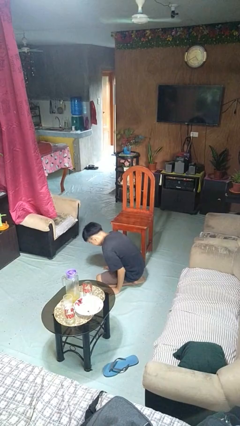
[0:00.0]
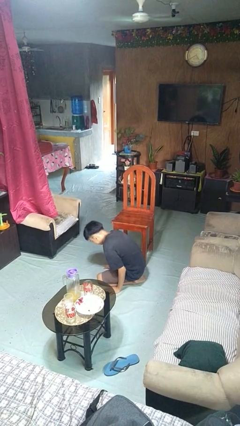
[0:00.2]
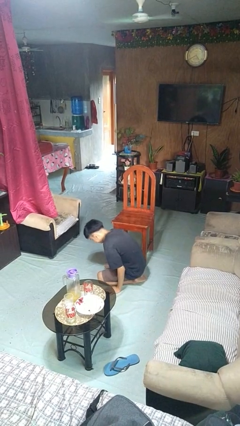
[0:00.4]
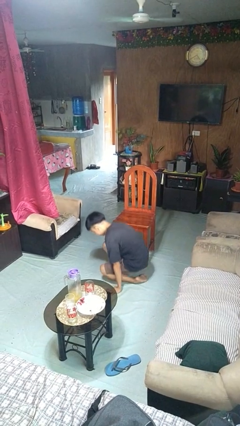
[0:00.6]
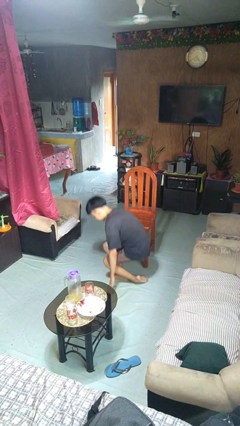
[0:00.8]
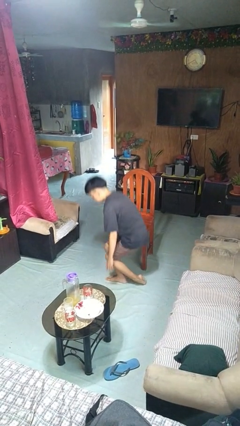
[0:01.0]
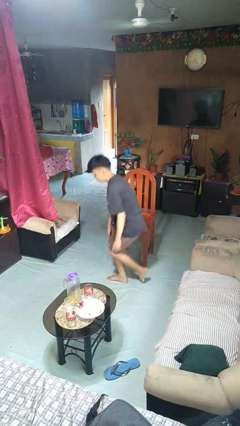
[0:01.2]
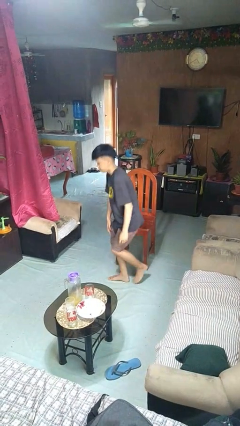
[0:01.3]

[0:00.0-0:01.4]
person stands up from floor

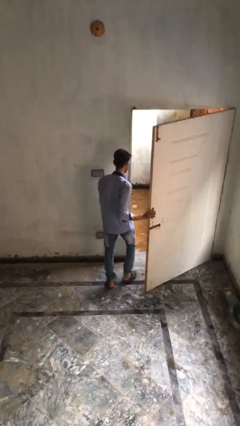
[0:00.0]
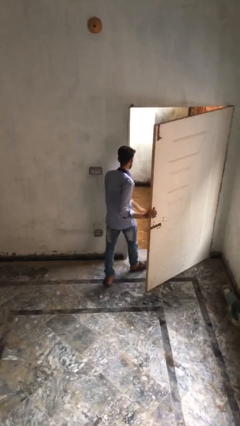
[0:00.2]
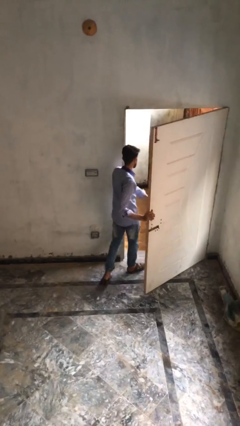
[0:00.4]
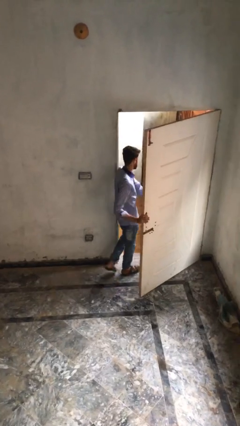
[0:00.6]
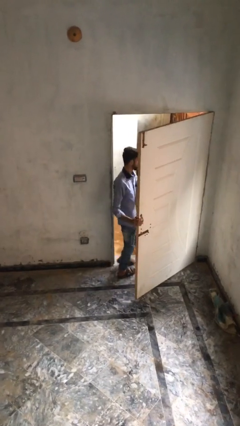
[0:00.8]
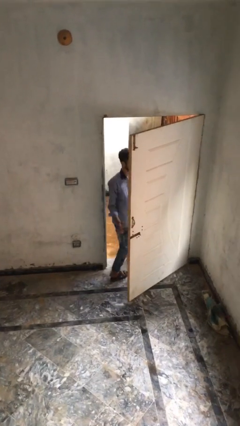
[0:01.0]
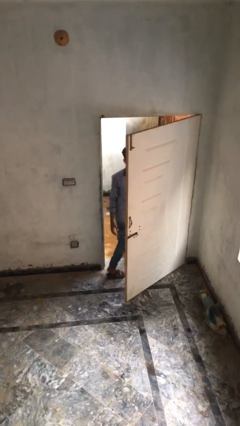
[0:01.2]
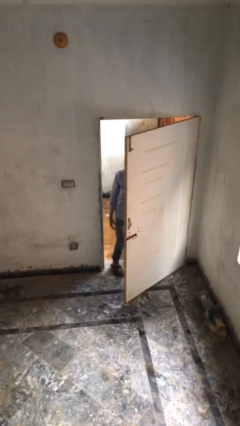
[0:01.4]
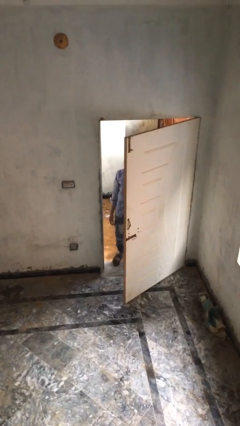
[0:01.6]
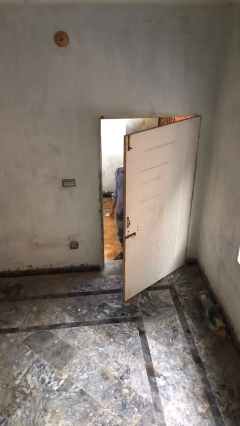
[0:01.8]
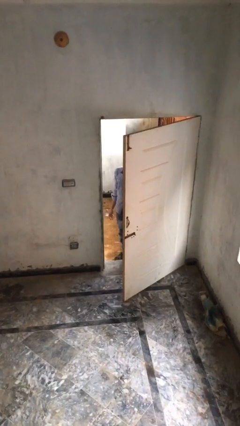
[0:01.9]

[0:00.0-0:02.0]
person exits scene through structure

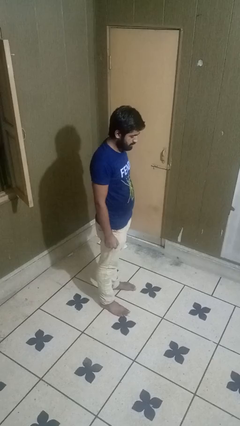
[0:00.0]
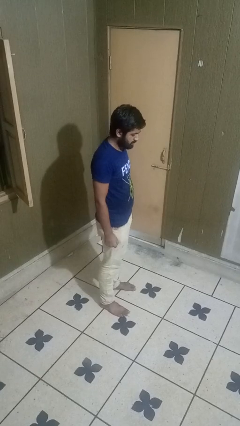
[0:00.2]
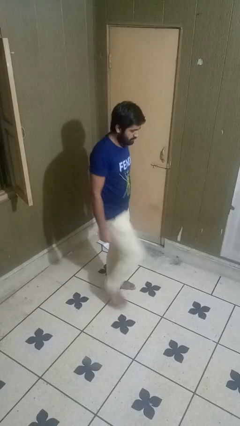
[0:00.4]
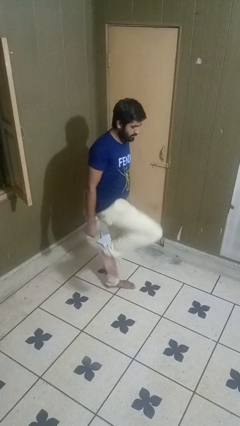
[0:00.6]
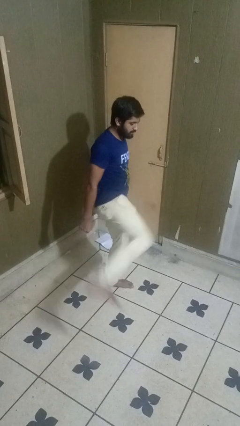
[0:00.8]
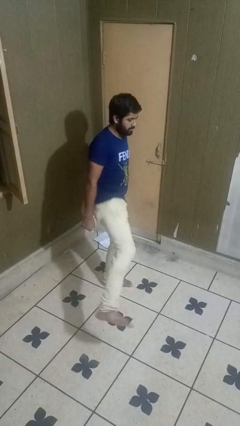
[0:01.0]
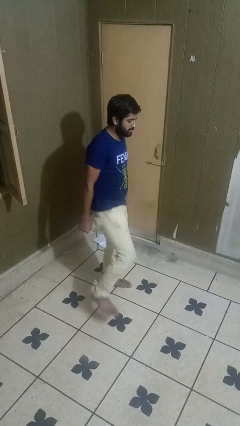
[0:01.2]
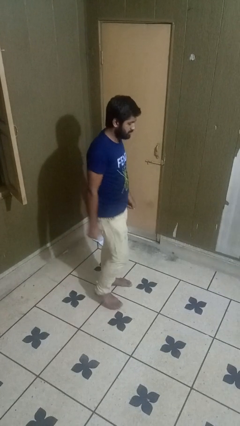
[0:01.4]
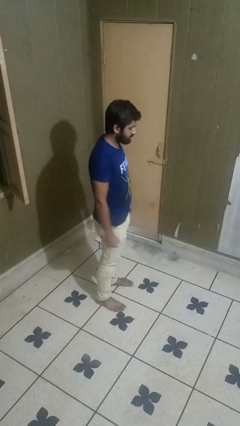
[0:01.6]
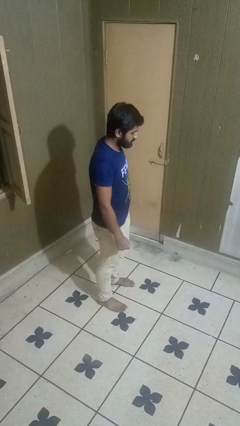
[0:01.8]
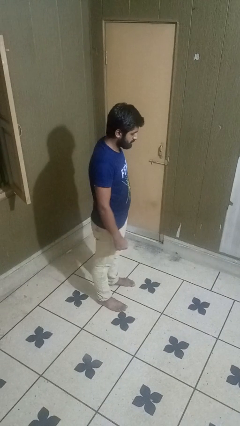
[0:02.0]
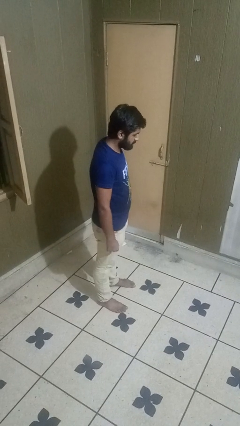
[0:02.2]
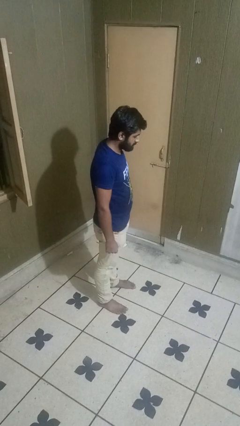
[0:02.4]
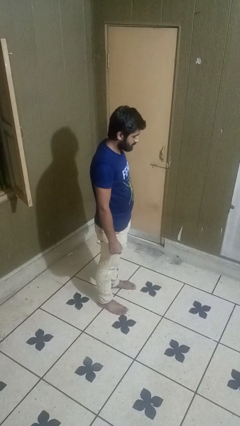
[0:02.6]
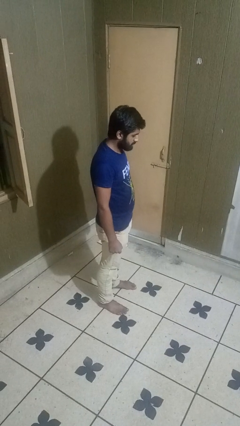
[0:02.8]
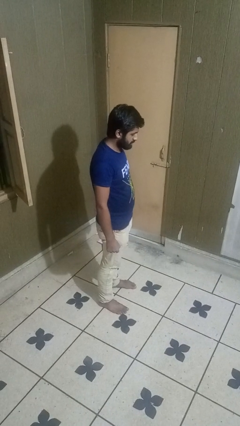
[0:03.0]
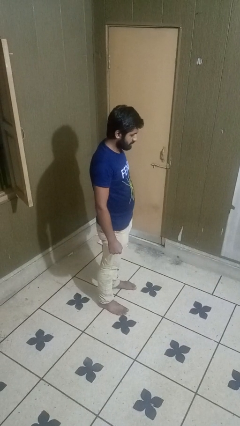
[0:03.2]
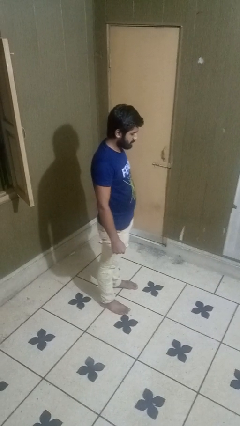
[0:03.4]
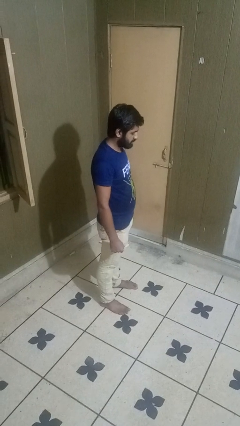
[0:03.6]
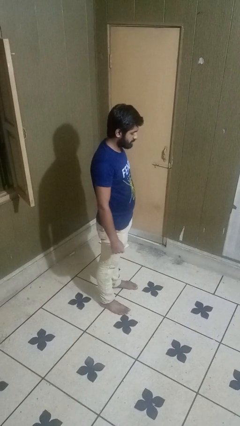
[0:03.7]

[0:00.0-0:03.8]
person karate kicks

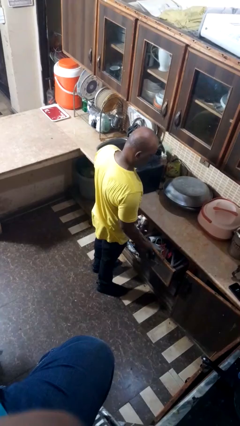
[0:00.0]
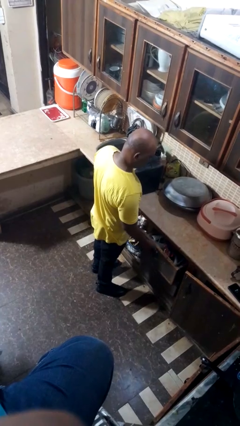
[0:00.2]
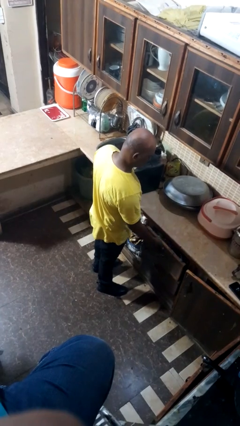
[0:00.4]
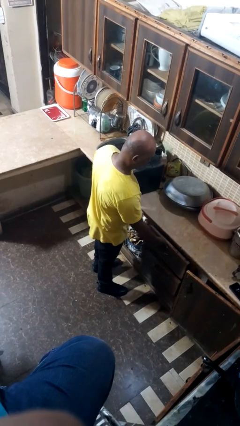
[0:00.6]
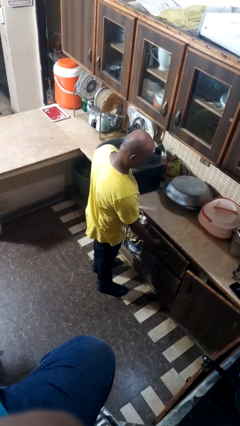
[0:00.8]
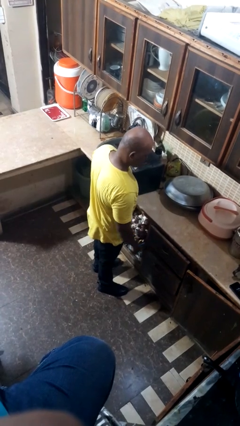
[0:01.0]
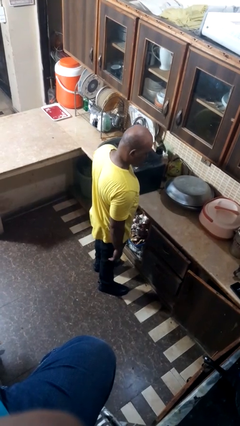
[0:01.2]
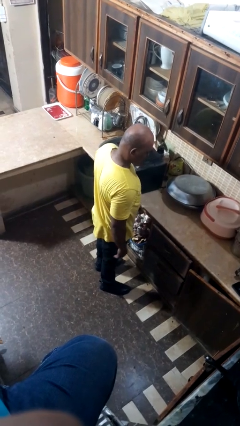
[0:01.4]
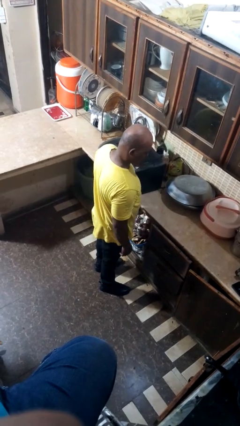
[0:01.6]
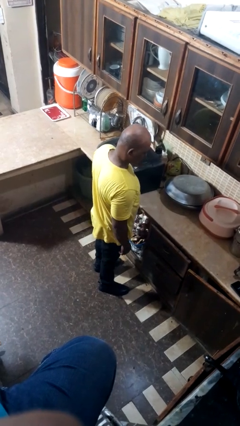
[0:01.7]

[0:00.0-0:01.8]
person closes dresser drawer

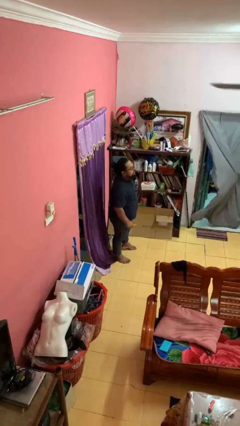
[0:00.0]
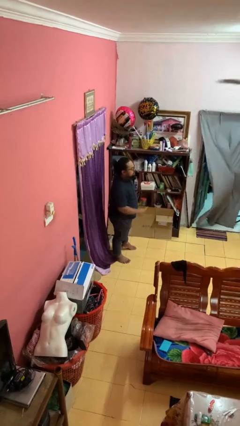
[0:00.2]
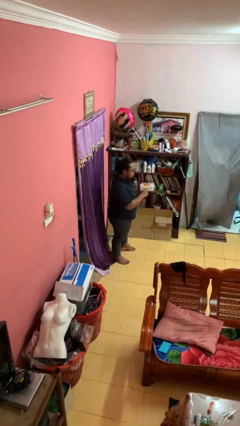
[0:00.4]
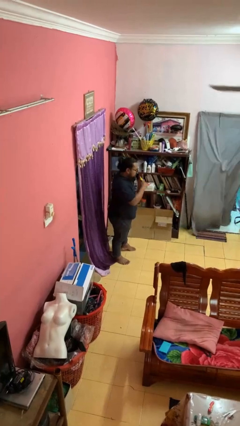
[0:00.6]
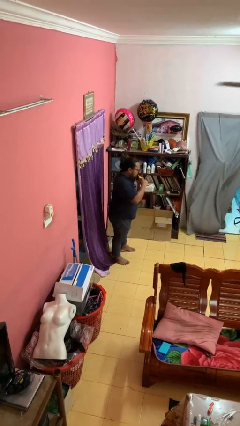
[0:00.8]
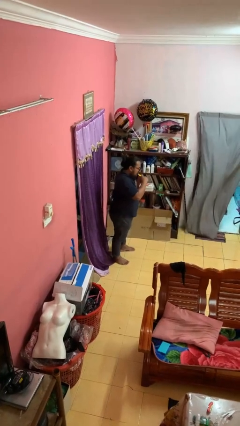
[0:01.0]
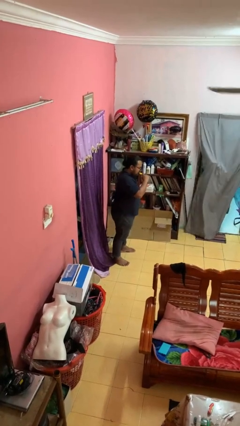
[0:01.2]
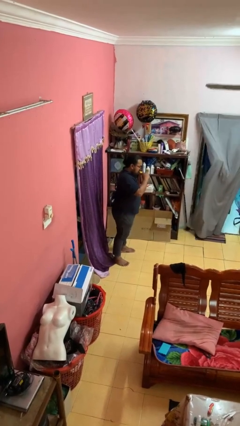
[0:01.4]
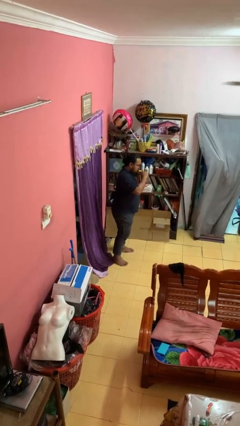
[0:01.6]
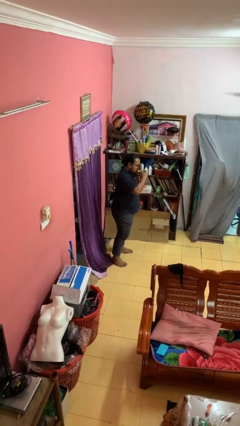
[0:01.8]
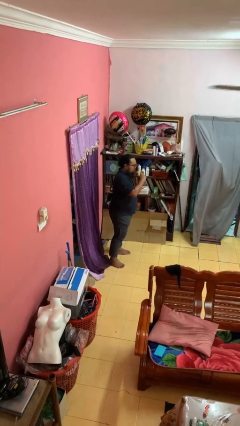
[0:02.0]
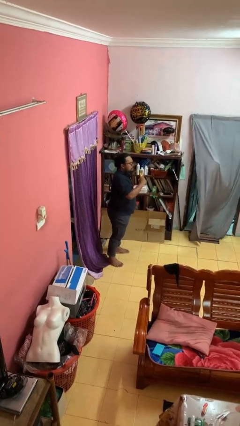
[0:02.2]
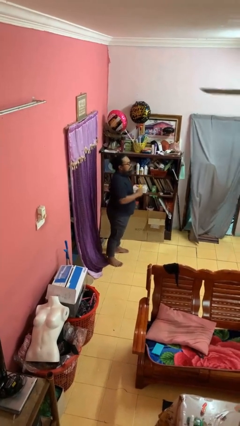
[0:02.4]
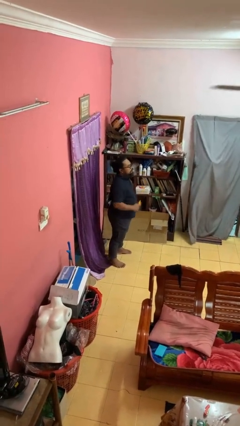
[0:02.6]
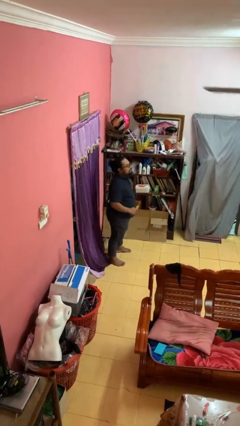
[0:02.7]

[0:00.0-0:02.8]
person eats banana

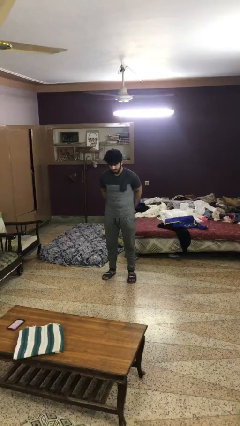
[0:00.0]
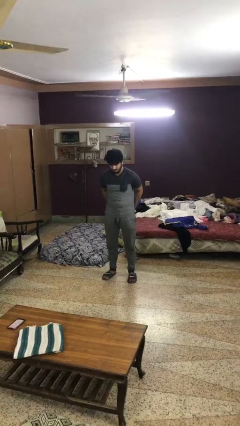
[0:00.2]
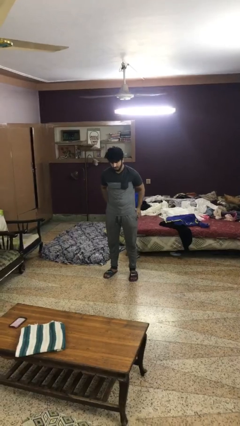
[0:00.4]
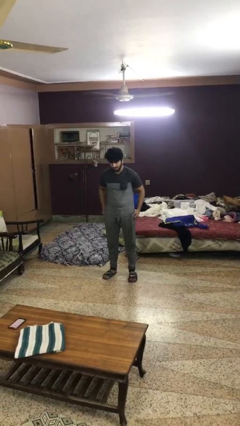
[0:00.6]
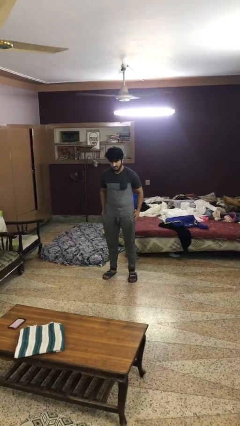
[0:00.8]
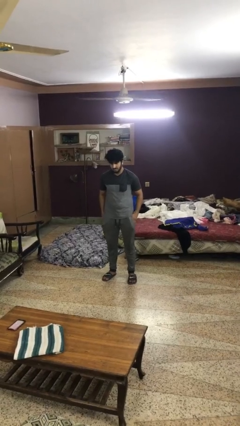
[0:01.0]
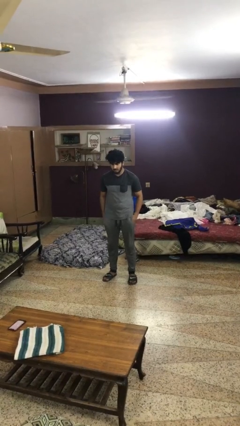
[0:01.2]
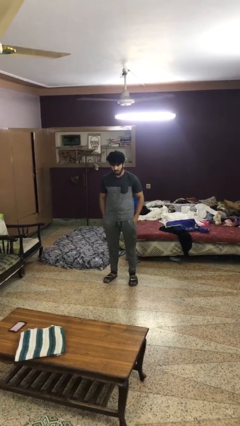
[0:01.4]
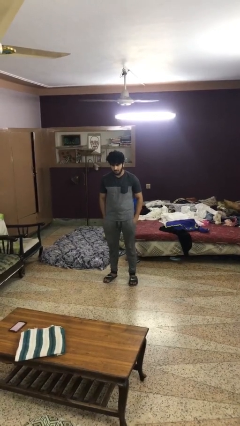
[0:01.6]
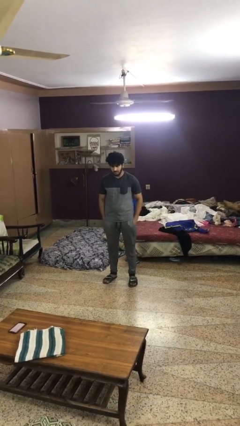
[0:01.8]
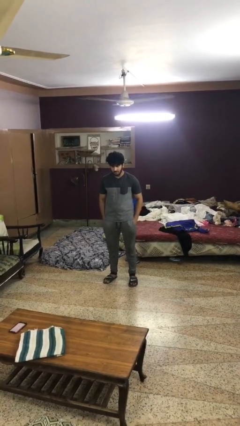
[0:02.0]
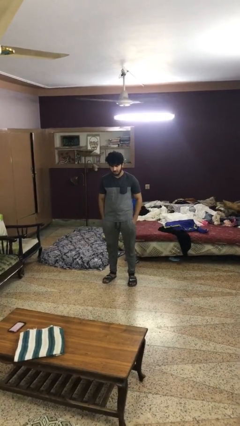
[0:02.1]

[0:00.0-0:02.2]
person puts hands in back pockets

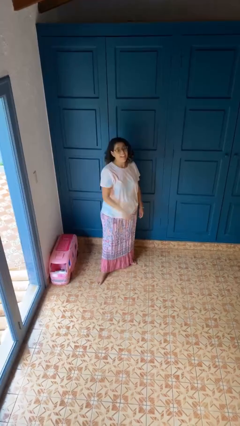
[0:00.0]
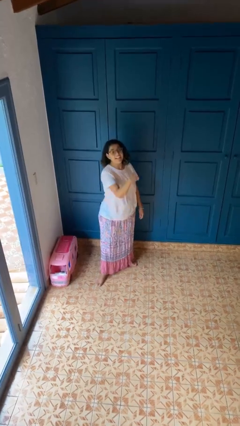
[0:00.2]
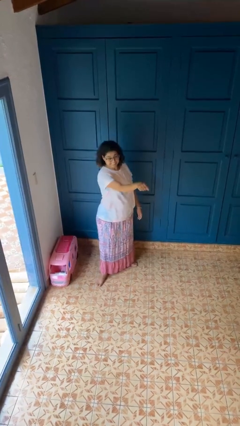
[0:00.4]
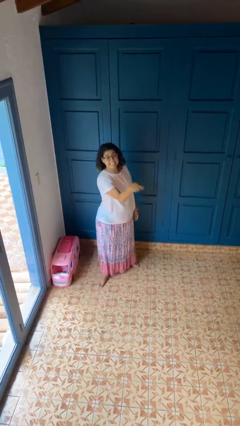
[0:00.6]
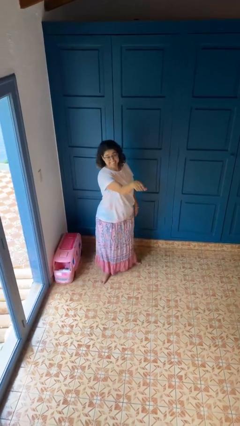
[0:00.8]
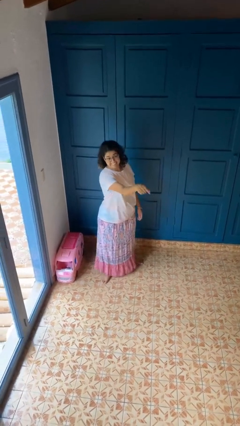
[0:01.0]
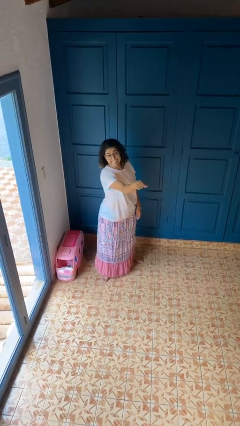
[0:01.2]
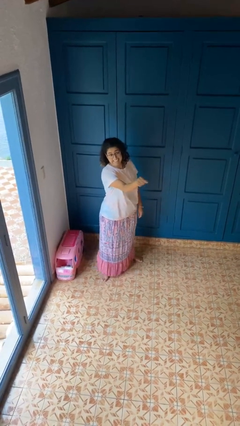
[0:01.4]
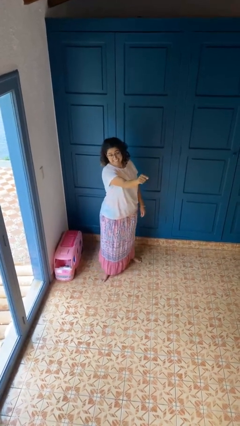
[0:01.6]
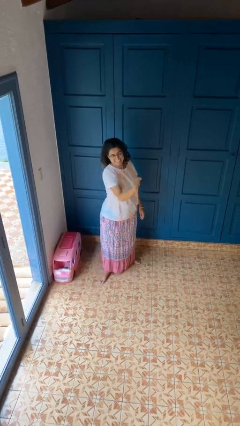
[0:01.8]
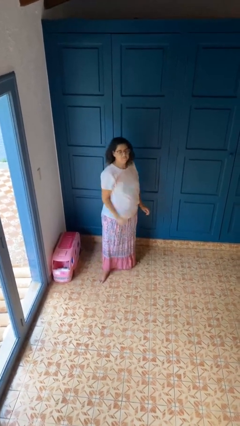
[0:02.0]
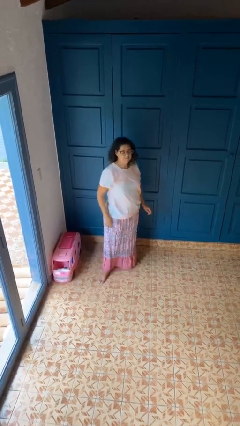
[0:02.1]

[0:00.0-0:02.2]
person points at person

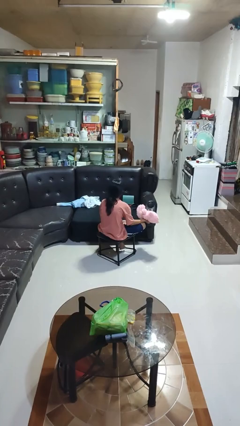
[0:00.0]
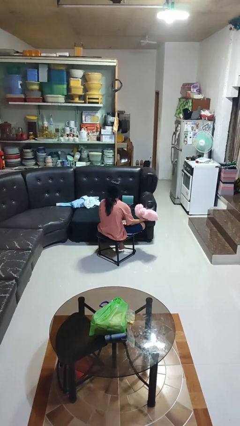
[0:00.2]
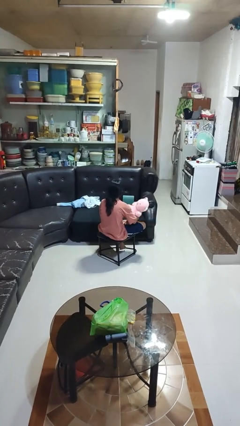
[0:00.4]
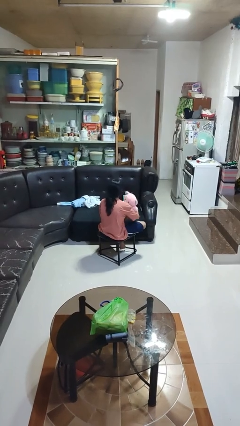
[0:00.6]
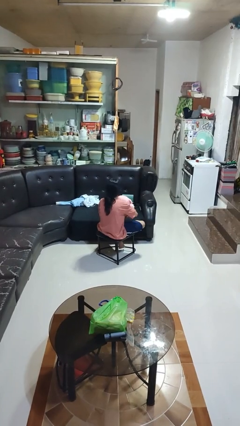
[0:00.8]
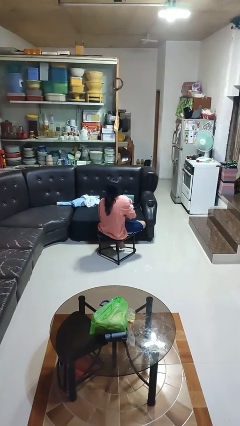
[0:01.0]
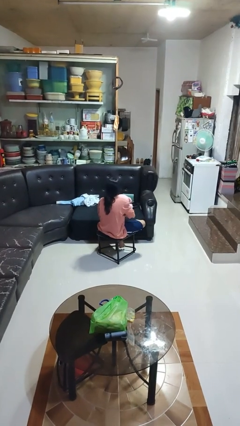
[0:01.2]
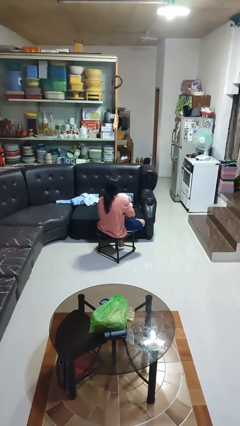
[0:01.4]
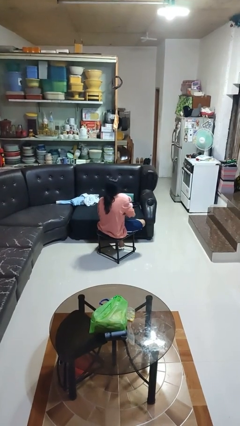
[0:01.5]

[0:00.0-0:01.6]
person hugs stuffed animal
